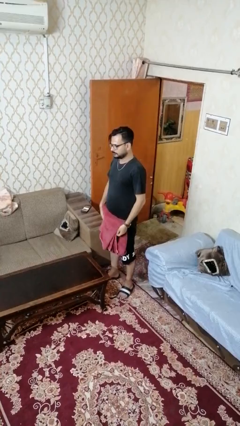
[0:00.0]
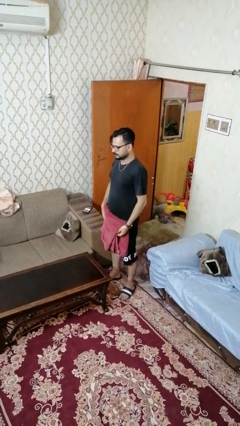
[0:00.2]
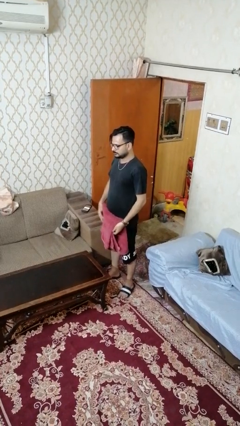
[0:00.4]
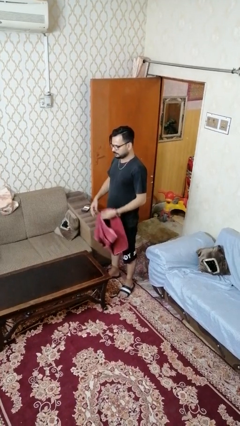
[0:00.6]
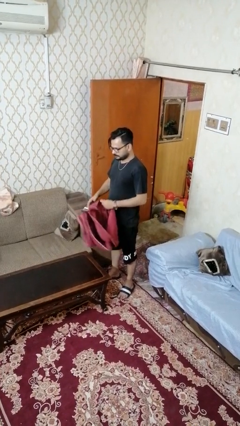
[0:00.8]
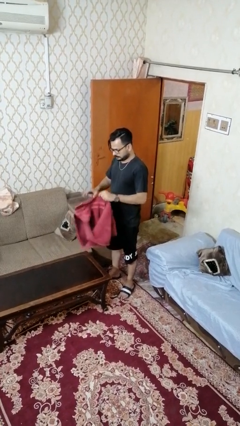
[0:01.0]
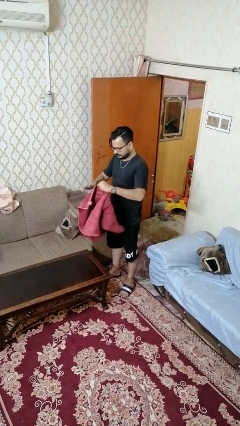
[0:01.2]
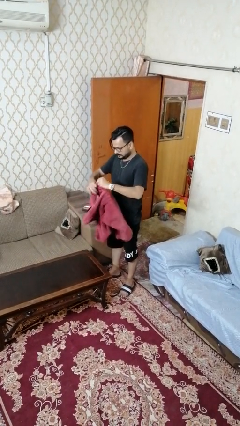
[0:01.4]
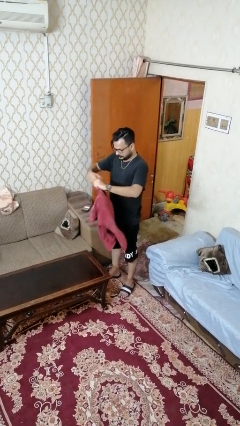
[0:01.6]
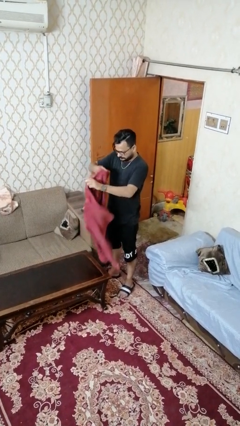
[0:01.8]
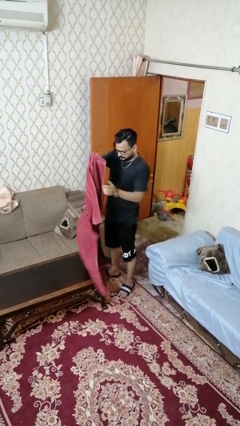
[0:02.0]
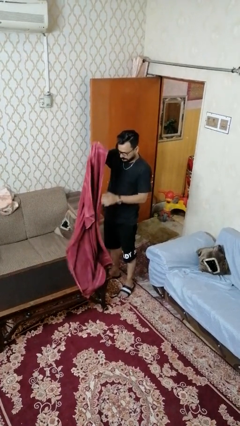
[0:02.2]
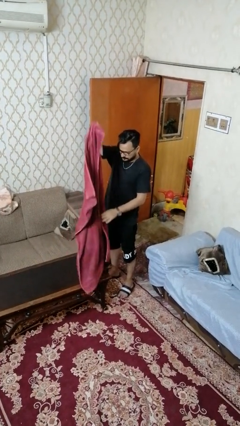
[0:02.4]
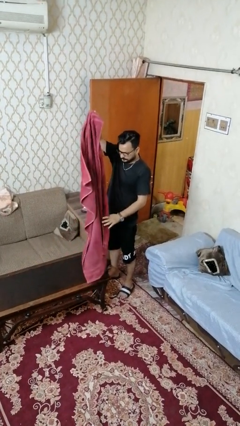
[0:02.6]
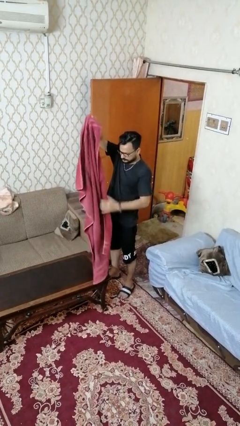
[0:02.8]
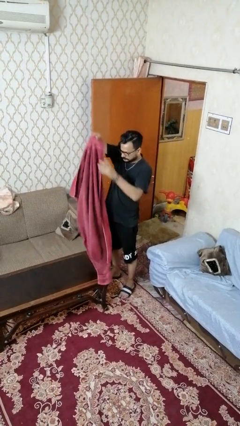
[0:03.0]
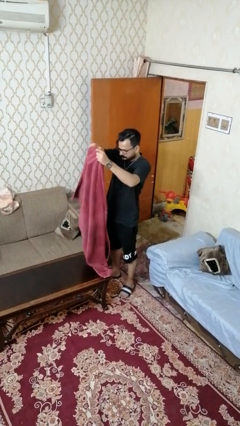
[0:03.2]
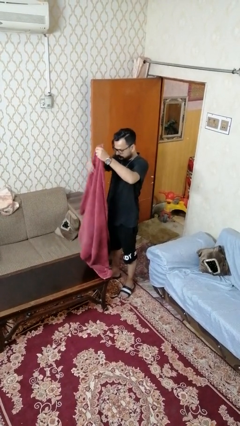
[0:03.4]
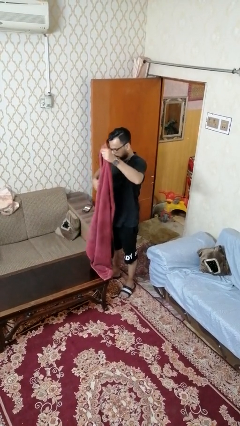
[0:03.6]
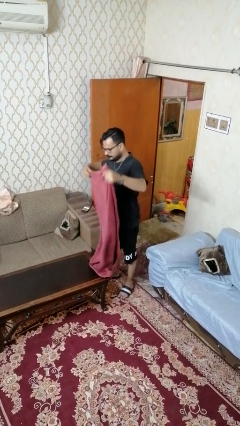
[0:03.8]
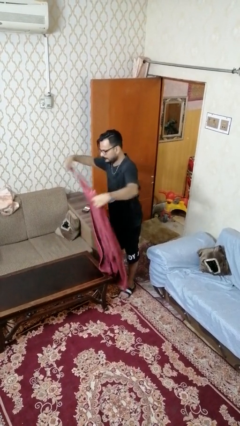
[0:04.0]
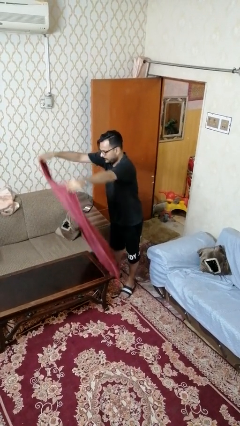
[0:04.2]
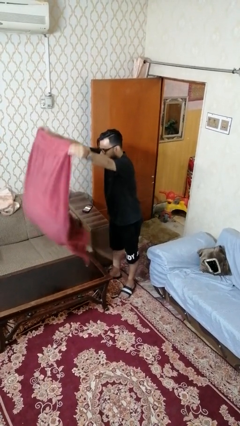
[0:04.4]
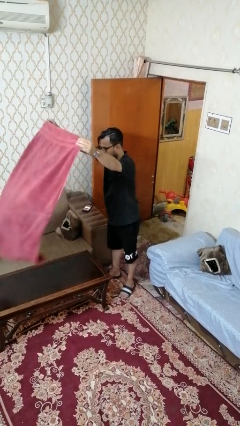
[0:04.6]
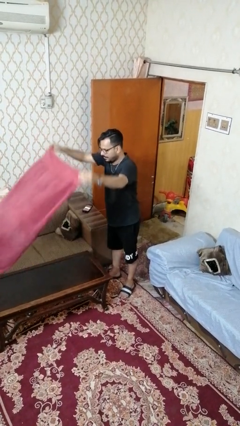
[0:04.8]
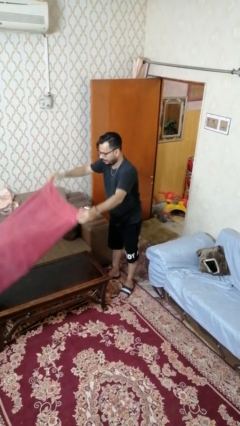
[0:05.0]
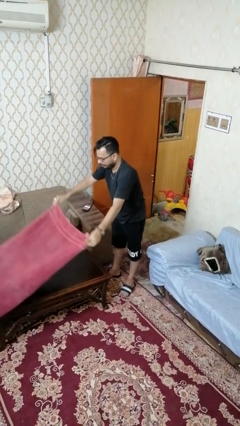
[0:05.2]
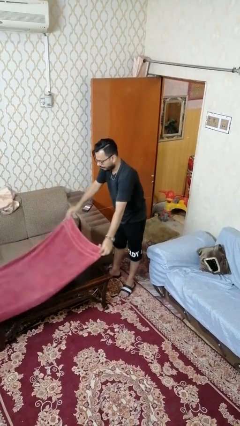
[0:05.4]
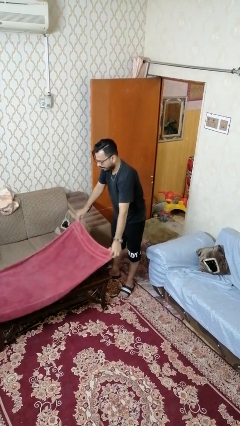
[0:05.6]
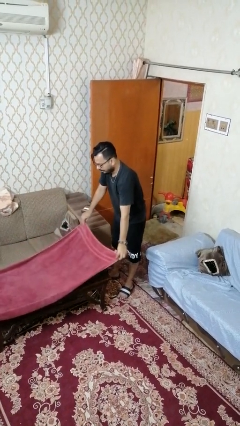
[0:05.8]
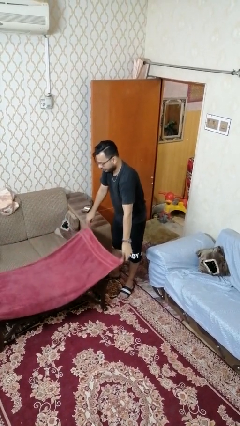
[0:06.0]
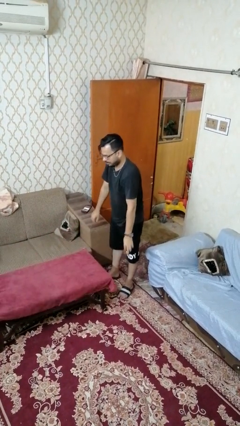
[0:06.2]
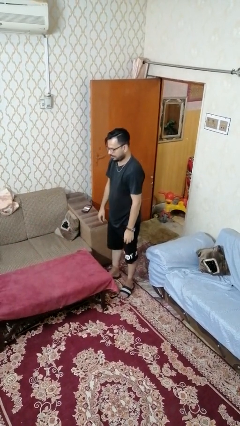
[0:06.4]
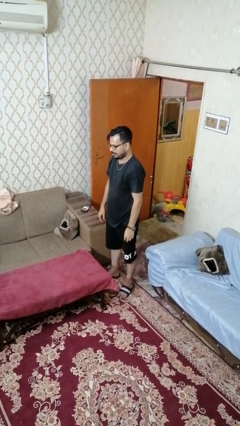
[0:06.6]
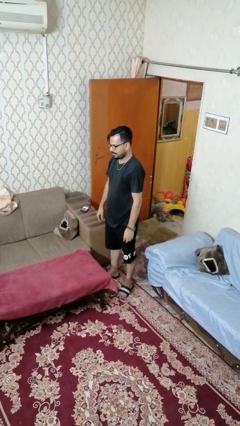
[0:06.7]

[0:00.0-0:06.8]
person spreads tablecloth

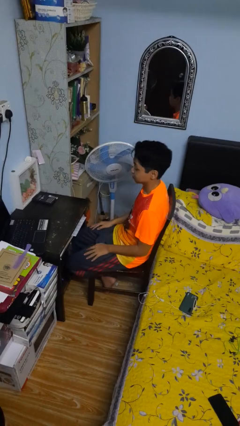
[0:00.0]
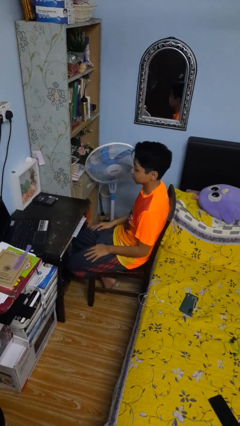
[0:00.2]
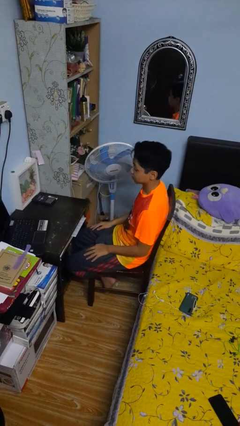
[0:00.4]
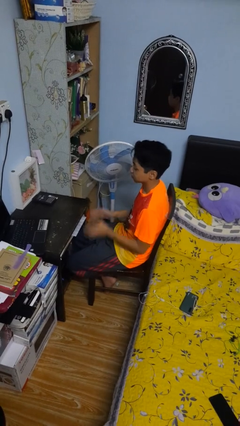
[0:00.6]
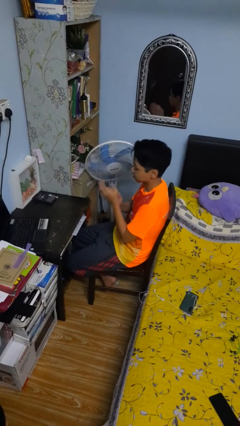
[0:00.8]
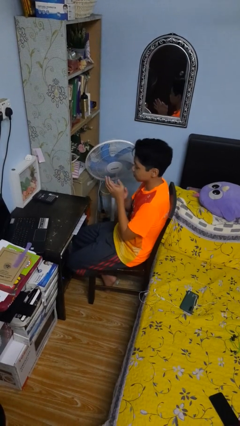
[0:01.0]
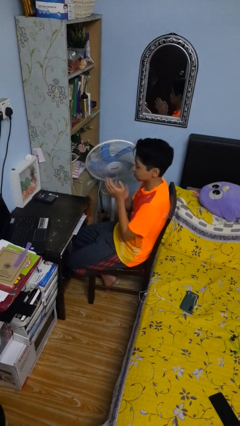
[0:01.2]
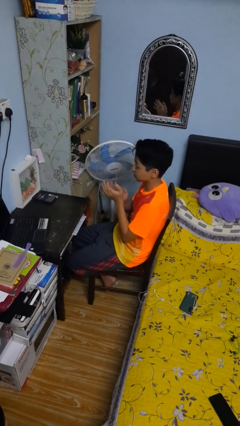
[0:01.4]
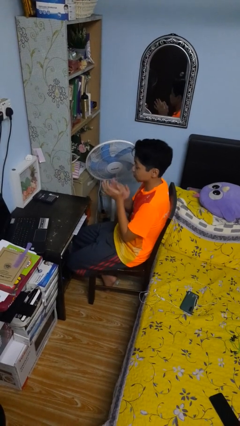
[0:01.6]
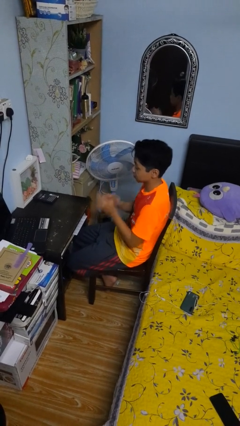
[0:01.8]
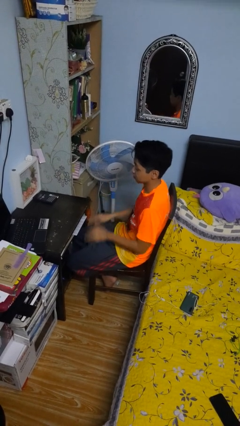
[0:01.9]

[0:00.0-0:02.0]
person claps hands

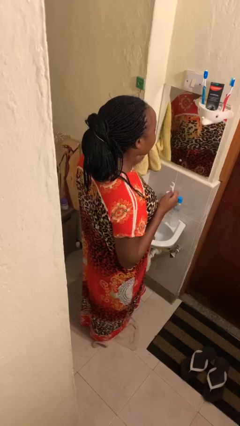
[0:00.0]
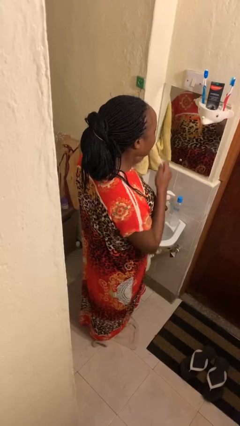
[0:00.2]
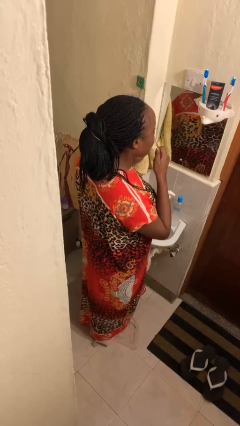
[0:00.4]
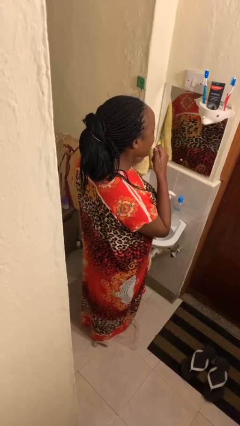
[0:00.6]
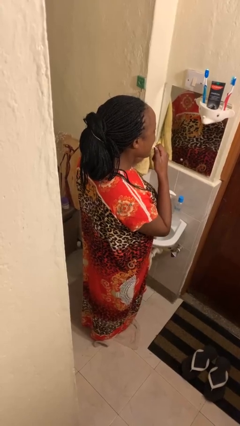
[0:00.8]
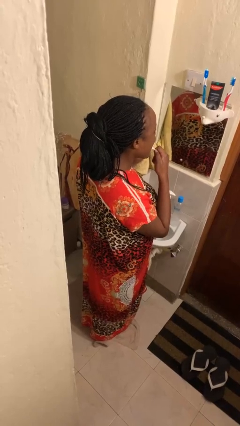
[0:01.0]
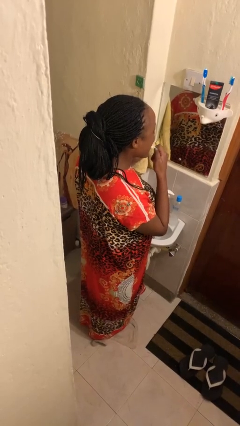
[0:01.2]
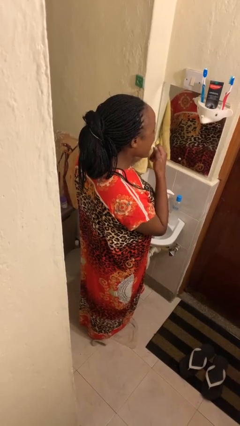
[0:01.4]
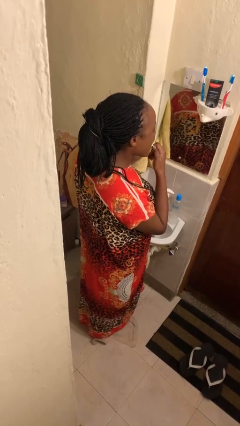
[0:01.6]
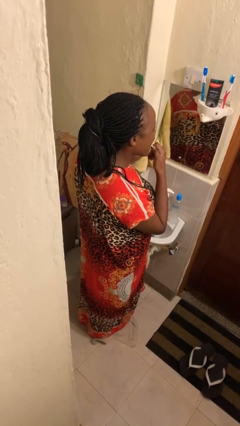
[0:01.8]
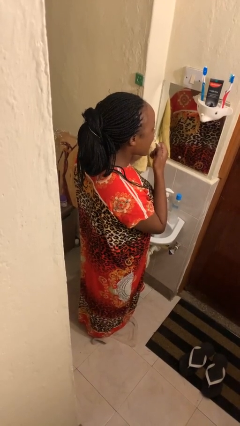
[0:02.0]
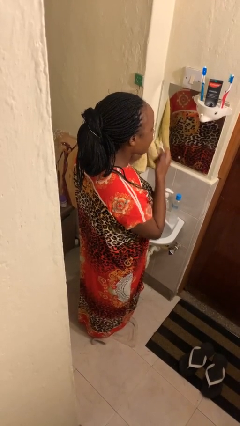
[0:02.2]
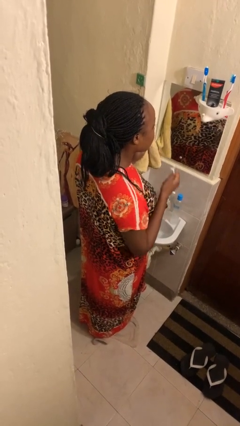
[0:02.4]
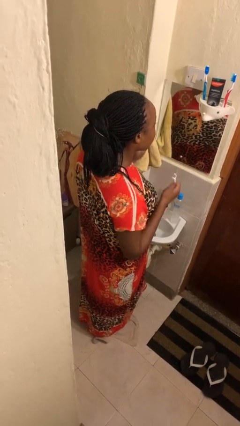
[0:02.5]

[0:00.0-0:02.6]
person flosses

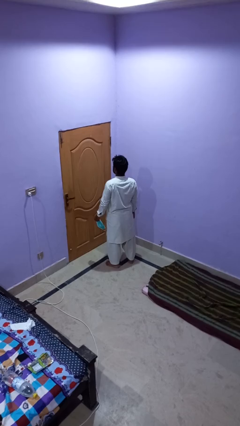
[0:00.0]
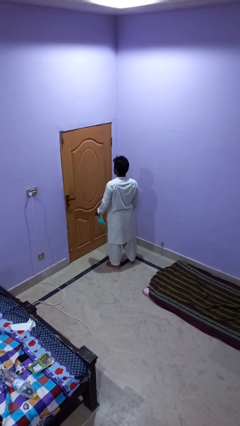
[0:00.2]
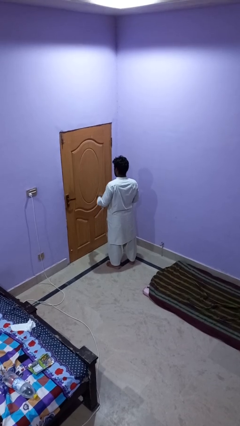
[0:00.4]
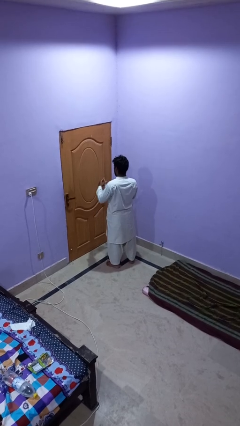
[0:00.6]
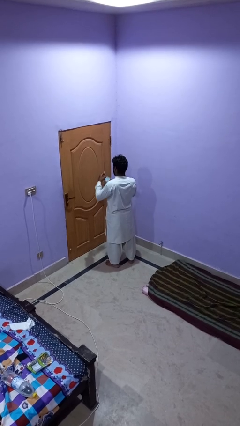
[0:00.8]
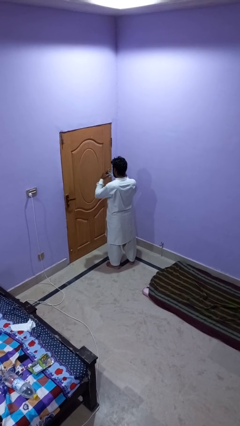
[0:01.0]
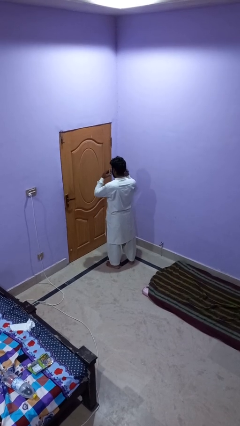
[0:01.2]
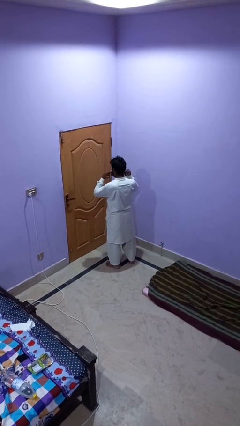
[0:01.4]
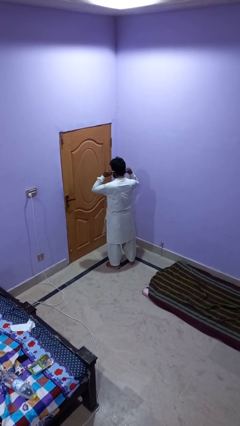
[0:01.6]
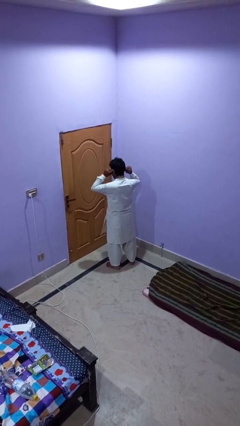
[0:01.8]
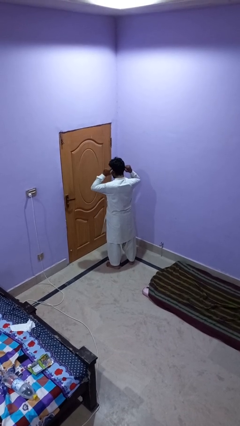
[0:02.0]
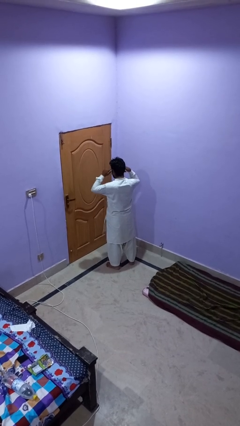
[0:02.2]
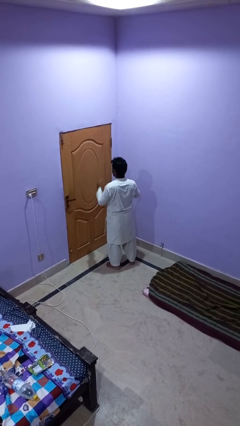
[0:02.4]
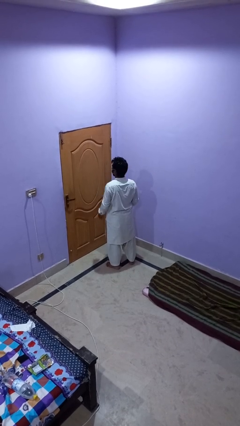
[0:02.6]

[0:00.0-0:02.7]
person puts on facemask

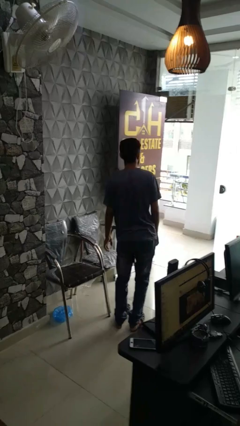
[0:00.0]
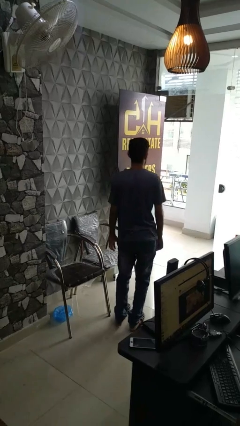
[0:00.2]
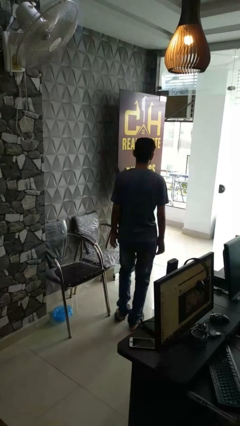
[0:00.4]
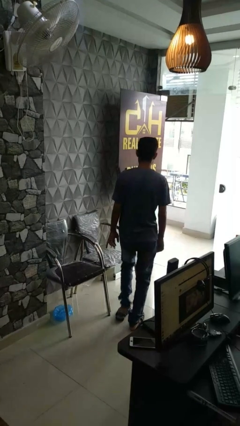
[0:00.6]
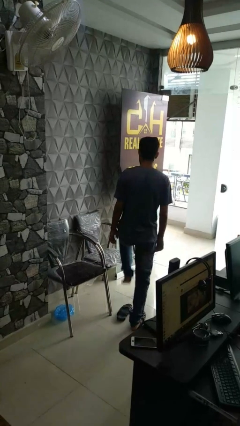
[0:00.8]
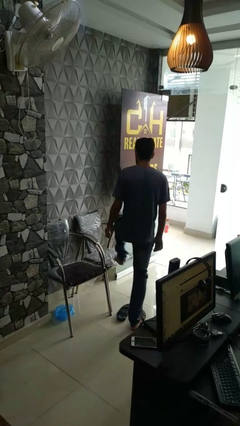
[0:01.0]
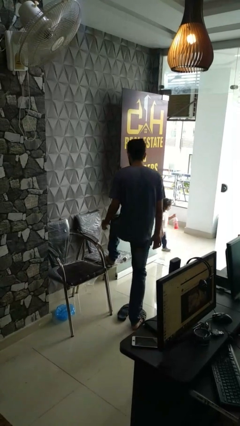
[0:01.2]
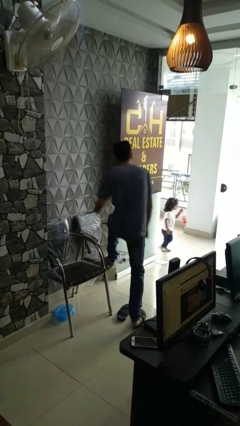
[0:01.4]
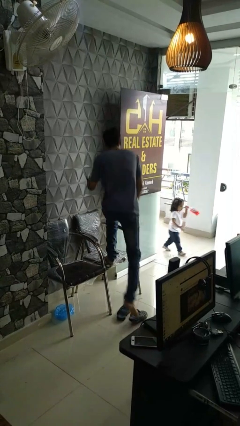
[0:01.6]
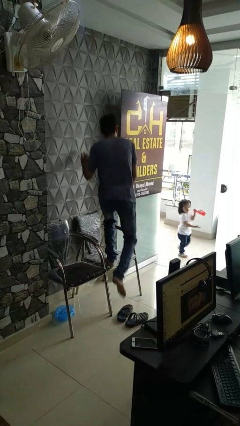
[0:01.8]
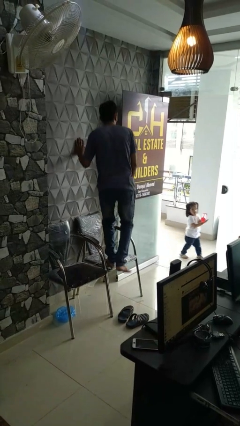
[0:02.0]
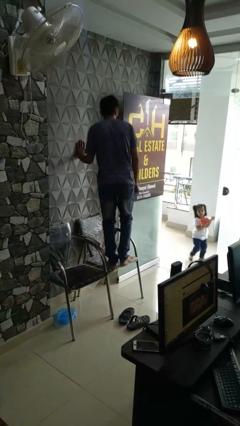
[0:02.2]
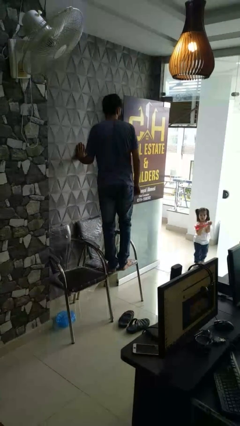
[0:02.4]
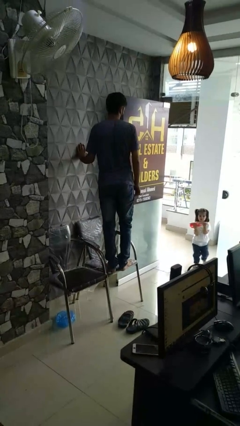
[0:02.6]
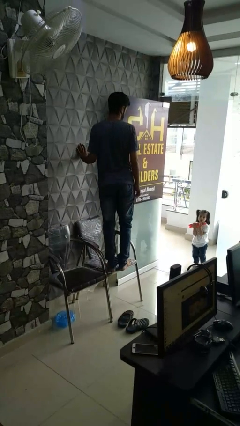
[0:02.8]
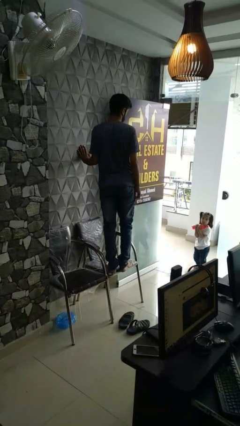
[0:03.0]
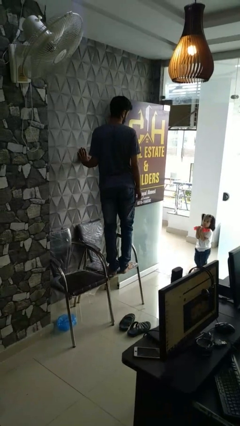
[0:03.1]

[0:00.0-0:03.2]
person climbs on chair
